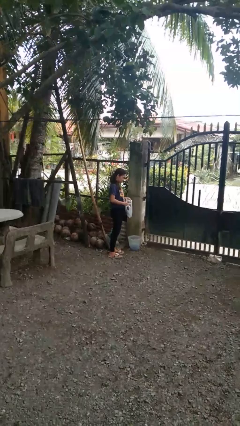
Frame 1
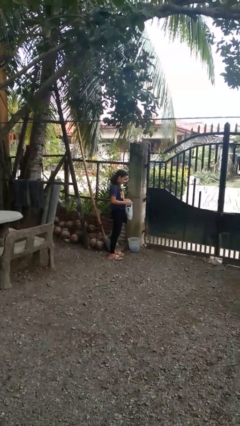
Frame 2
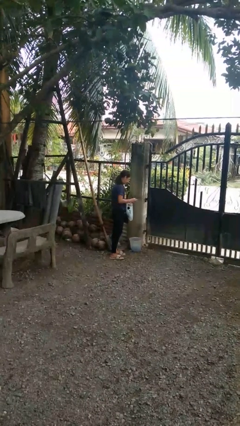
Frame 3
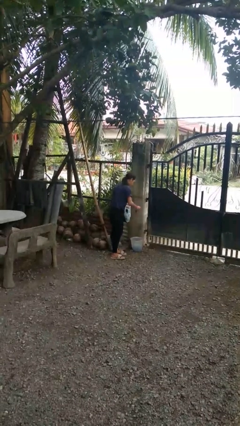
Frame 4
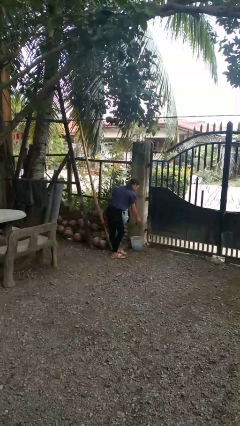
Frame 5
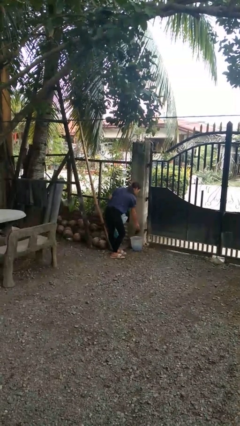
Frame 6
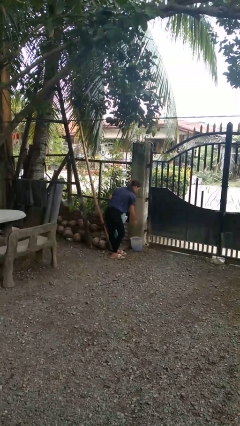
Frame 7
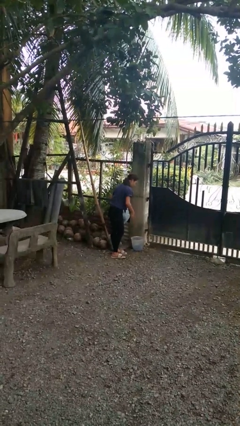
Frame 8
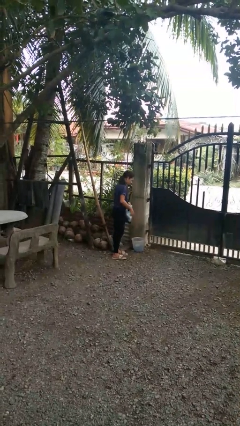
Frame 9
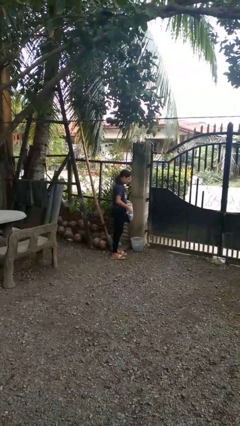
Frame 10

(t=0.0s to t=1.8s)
person discards trash

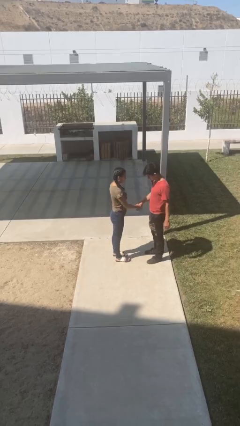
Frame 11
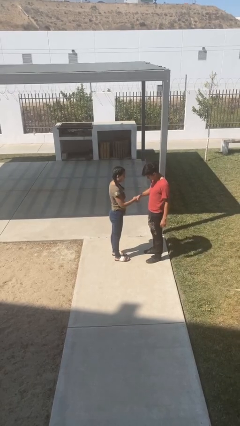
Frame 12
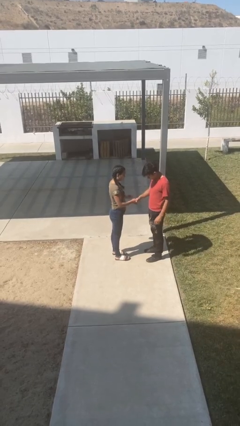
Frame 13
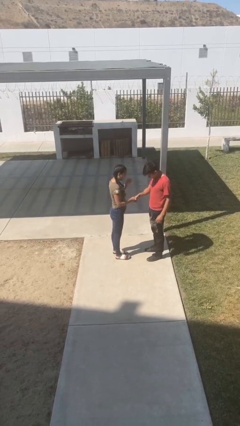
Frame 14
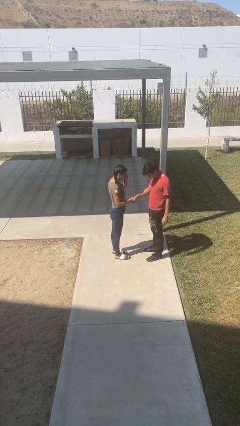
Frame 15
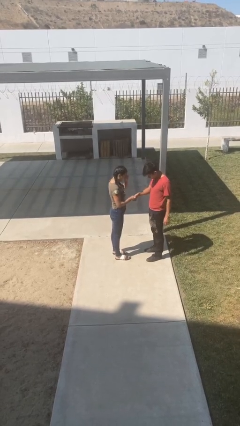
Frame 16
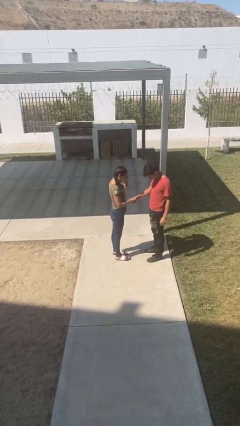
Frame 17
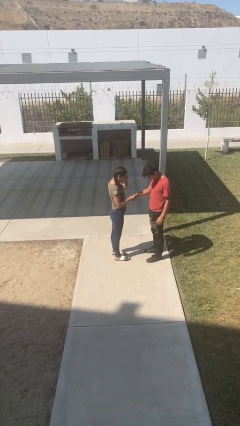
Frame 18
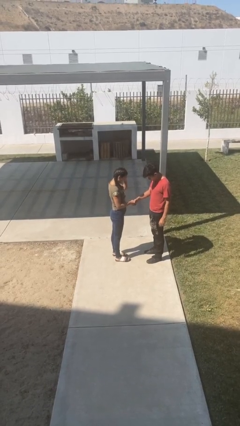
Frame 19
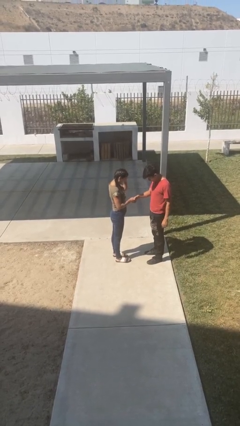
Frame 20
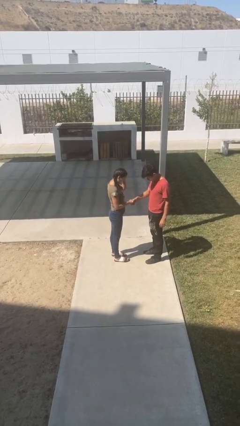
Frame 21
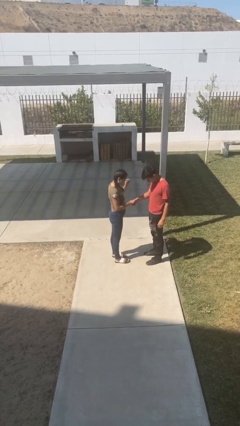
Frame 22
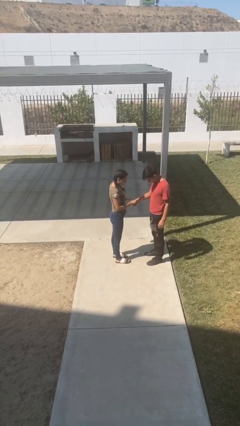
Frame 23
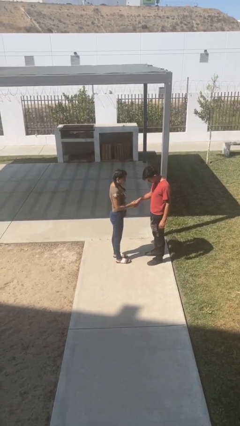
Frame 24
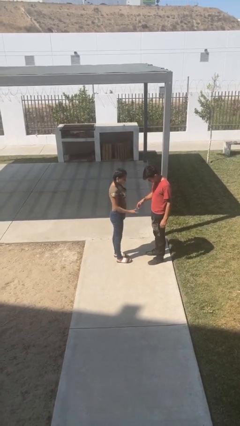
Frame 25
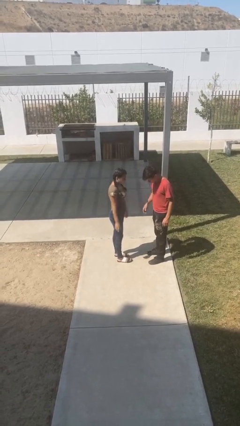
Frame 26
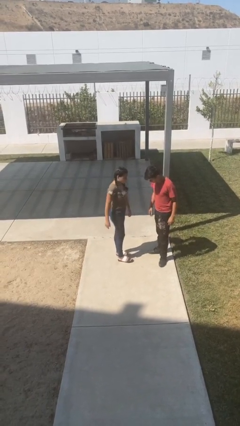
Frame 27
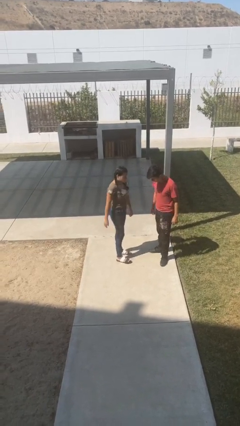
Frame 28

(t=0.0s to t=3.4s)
person shakes hand

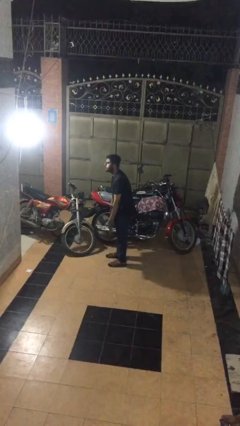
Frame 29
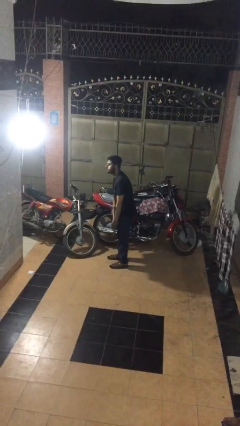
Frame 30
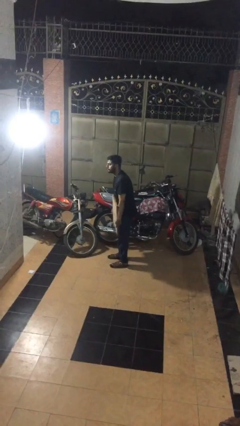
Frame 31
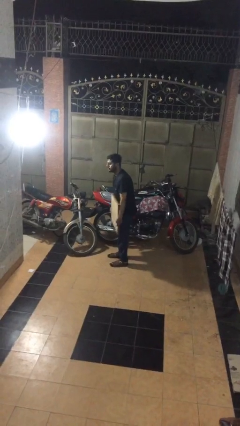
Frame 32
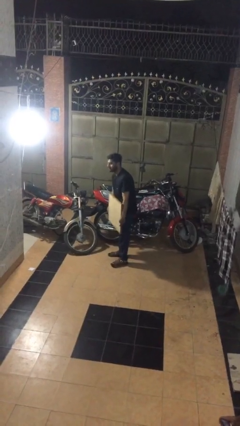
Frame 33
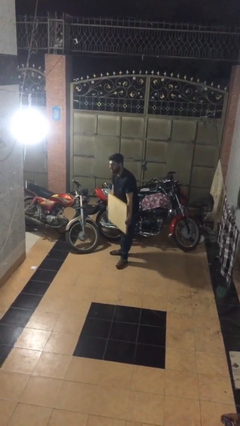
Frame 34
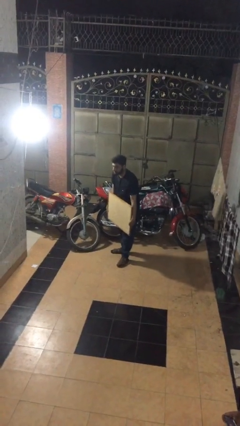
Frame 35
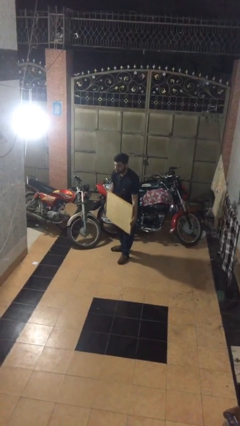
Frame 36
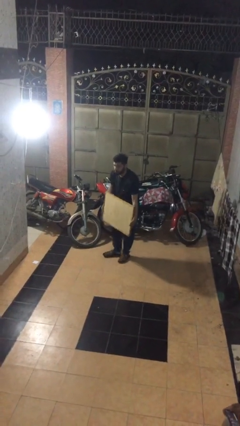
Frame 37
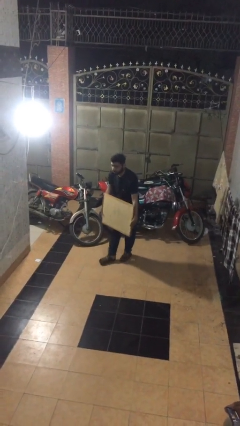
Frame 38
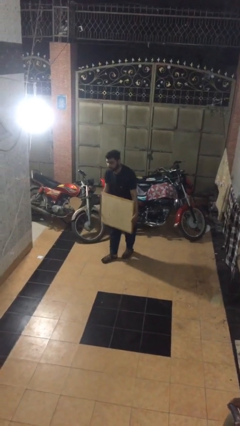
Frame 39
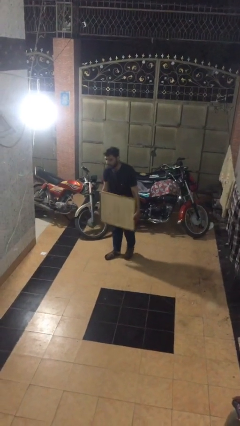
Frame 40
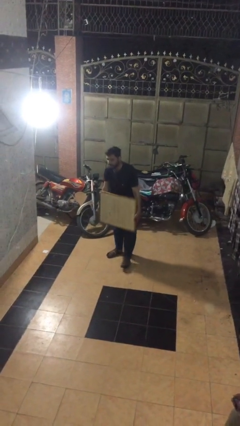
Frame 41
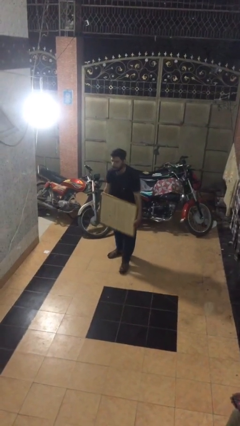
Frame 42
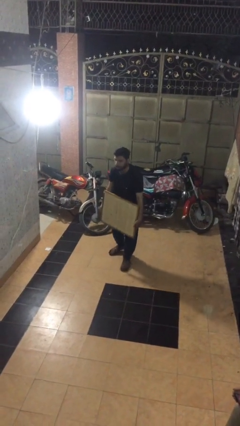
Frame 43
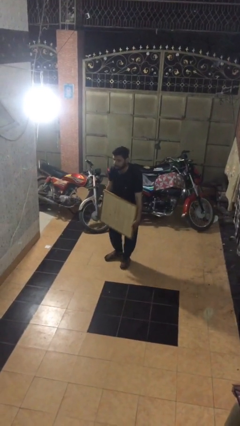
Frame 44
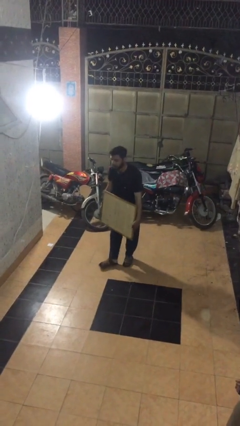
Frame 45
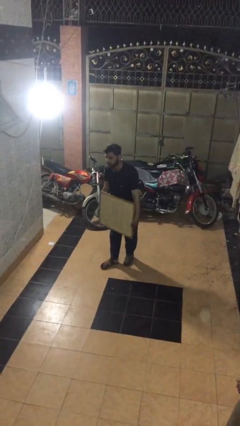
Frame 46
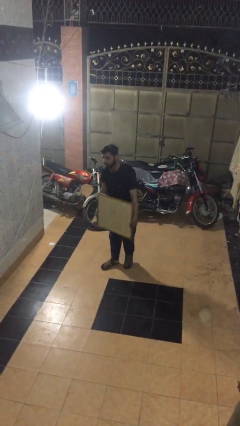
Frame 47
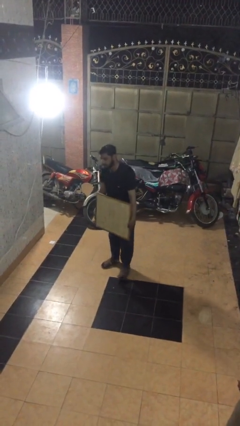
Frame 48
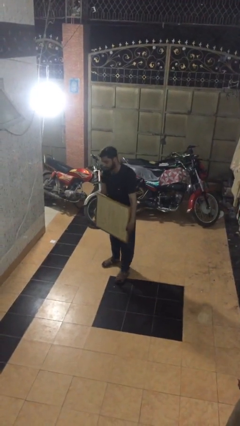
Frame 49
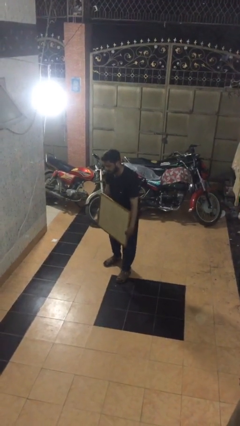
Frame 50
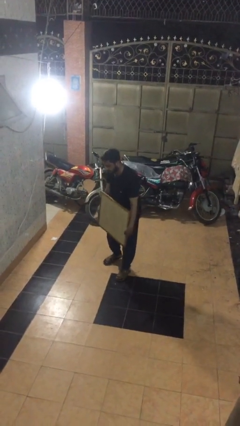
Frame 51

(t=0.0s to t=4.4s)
person carries heavy object

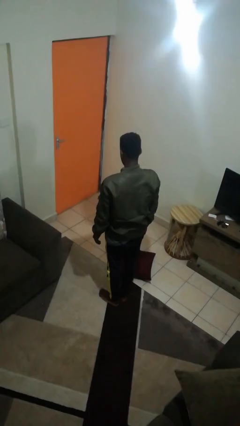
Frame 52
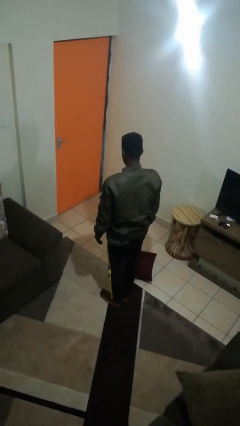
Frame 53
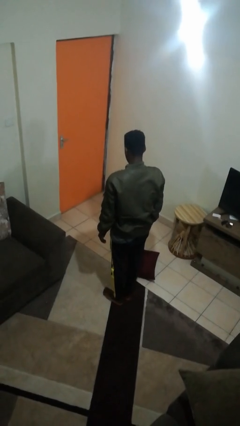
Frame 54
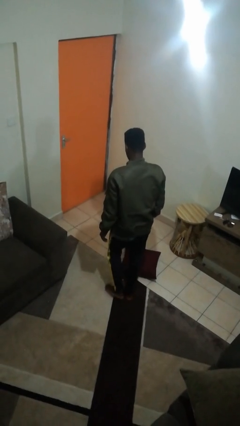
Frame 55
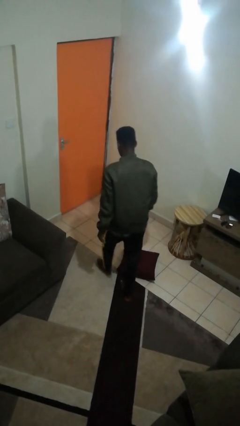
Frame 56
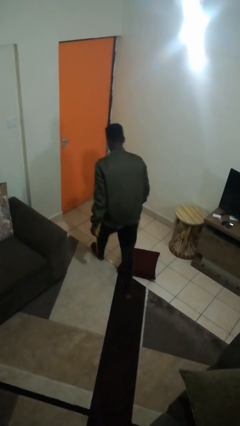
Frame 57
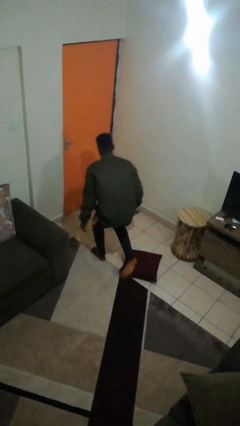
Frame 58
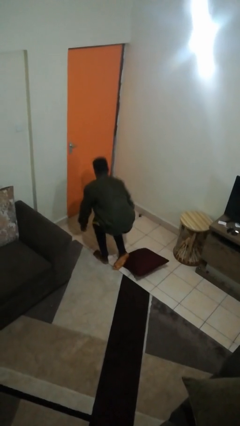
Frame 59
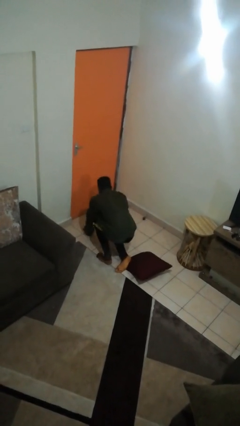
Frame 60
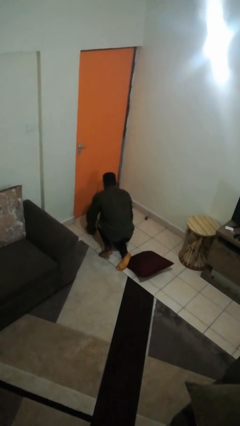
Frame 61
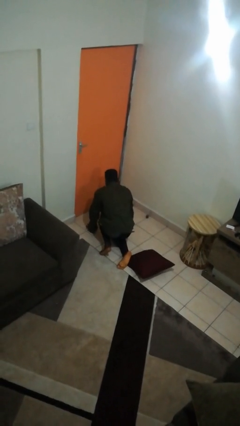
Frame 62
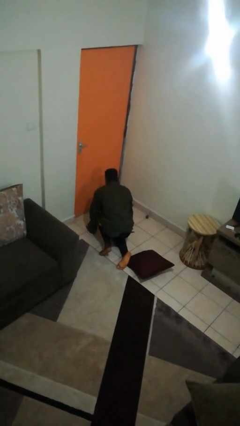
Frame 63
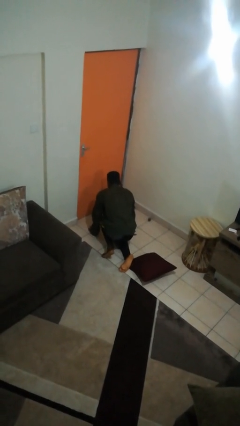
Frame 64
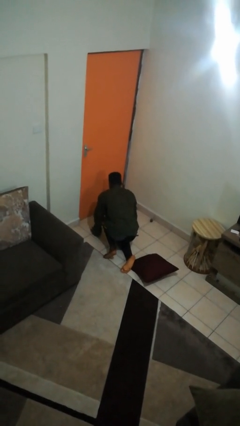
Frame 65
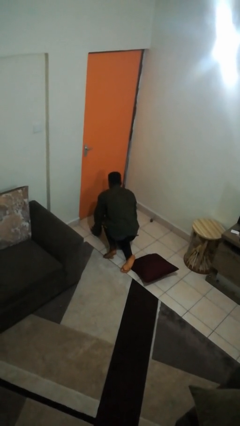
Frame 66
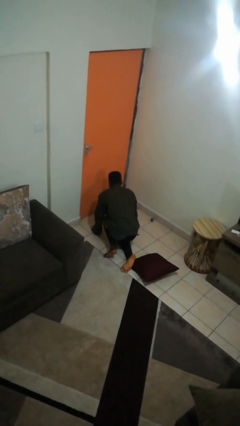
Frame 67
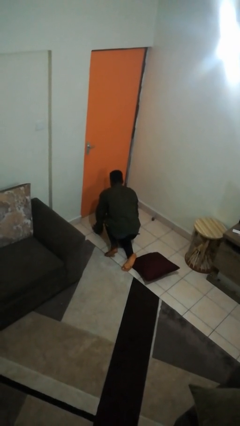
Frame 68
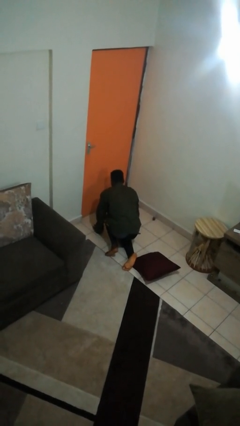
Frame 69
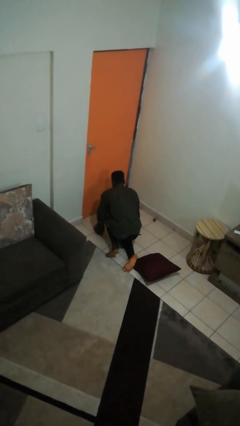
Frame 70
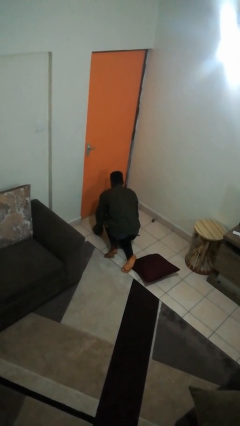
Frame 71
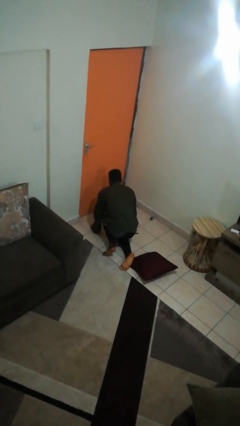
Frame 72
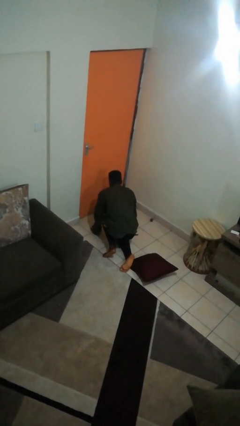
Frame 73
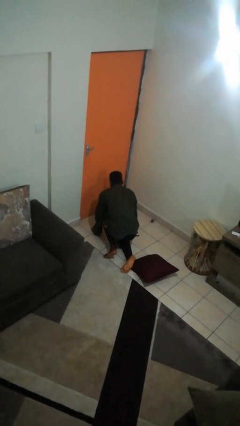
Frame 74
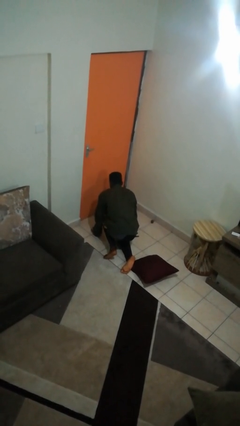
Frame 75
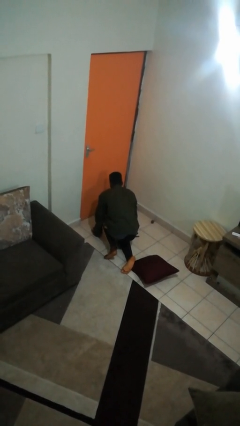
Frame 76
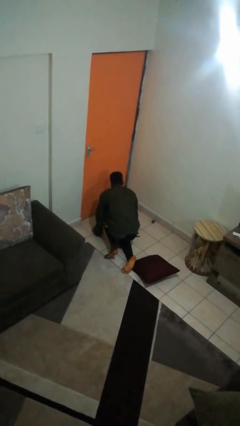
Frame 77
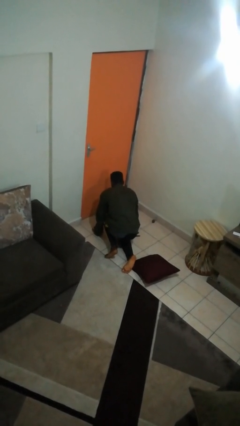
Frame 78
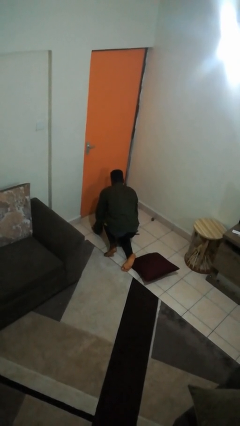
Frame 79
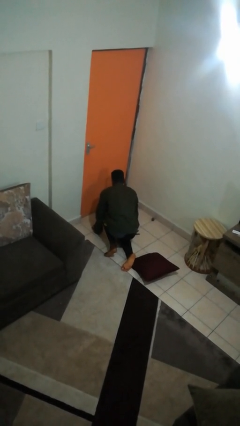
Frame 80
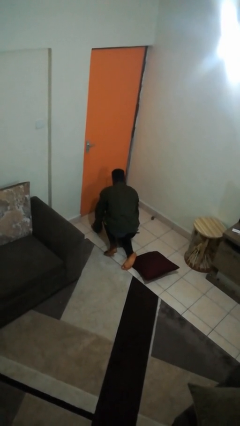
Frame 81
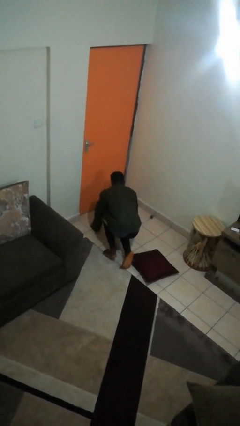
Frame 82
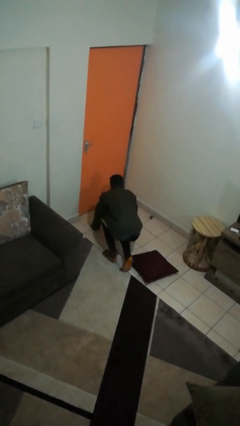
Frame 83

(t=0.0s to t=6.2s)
person trips on object on floor

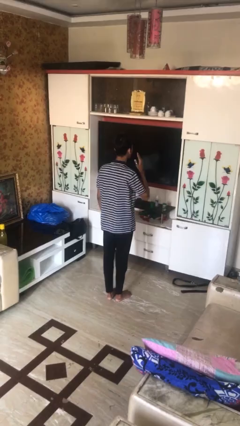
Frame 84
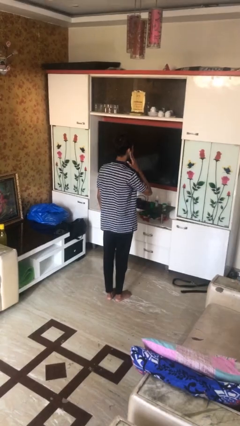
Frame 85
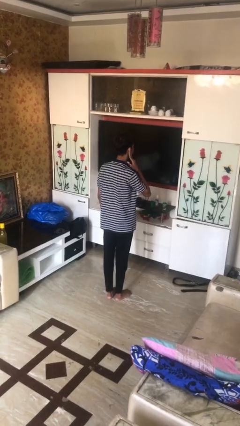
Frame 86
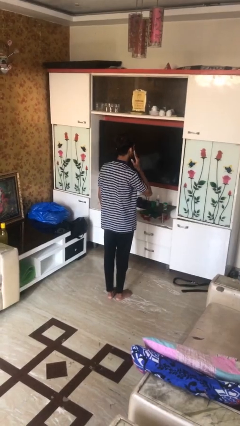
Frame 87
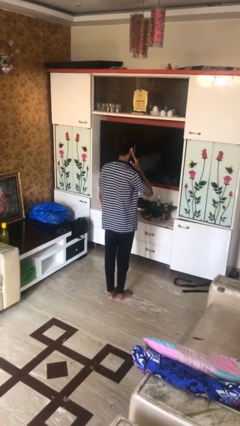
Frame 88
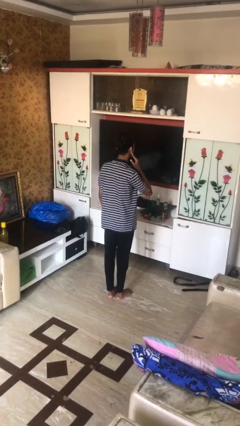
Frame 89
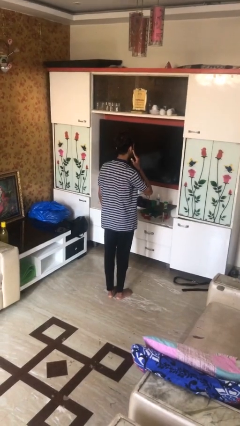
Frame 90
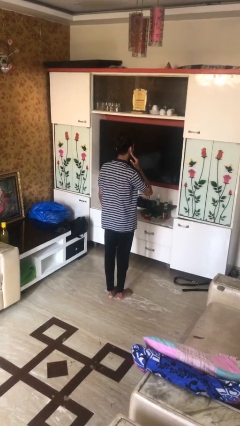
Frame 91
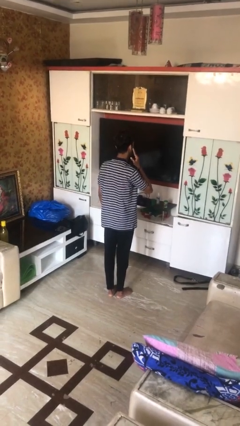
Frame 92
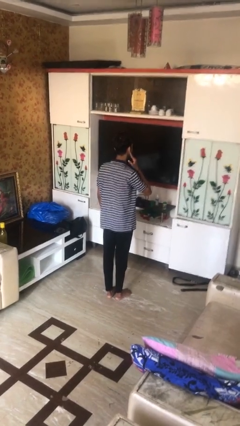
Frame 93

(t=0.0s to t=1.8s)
person touches earlobe
